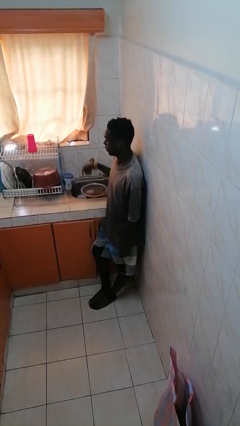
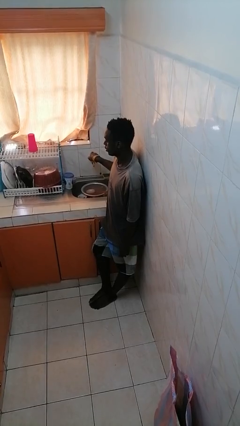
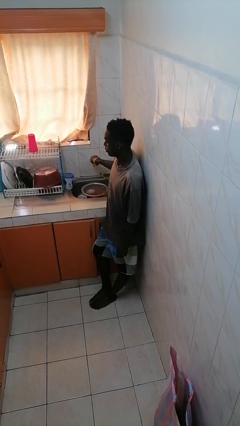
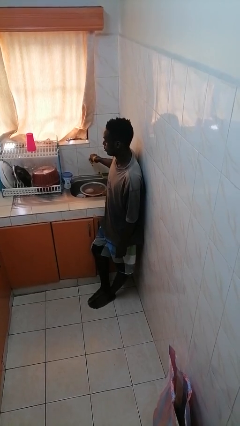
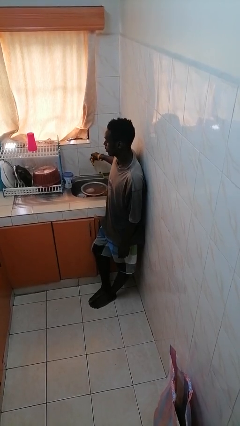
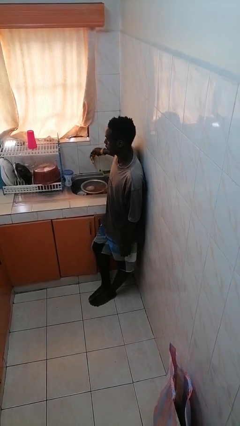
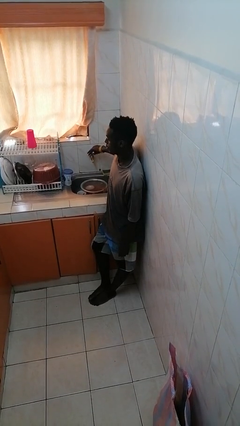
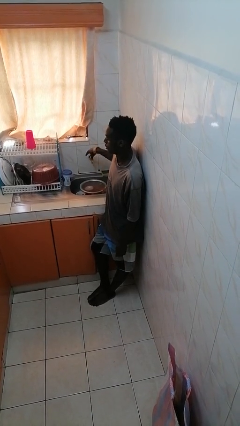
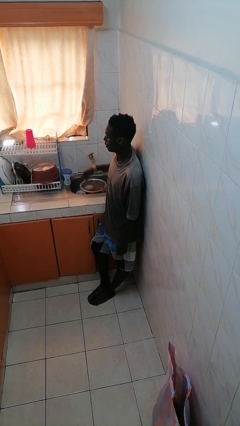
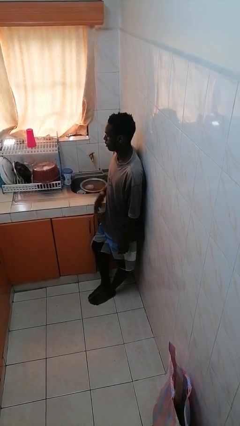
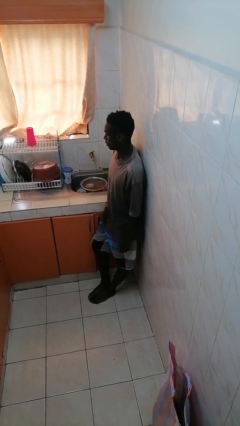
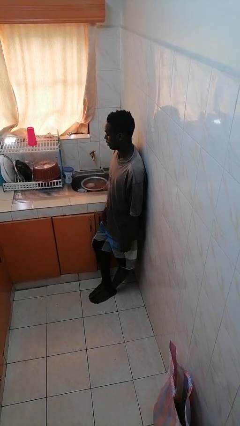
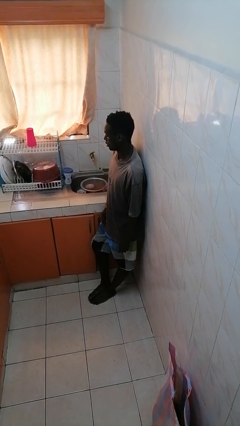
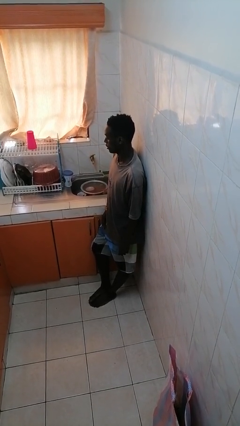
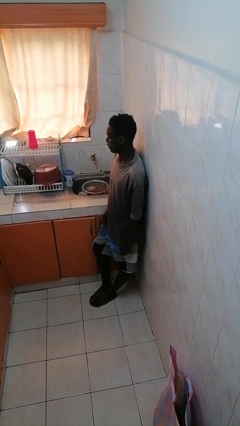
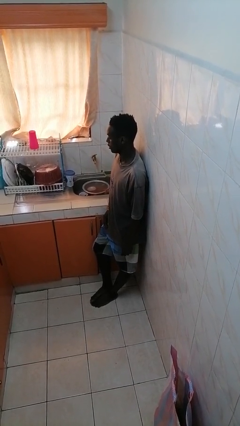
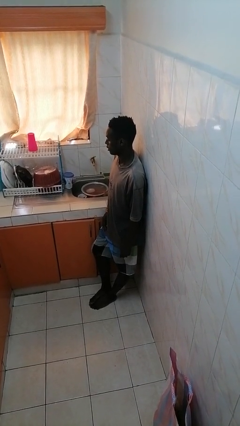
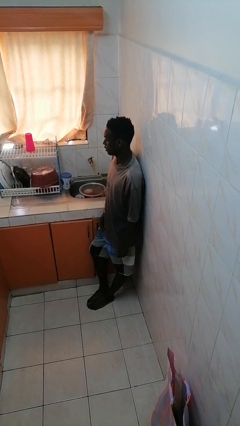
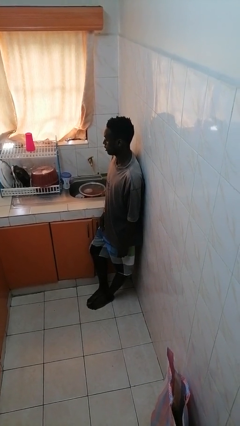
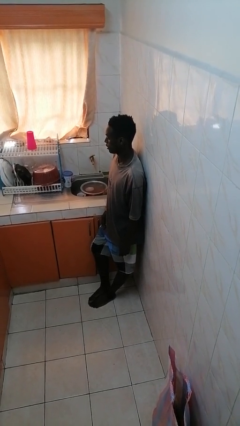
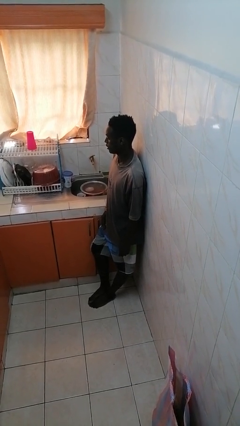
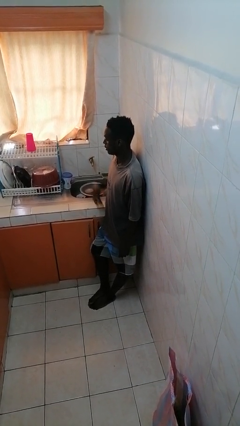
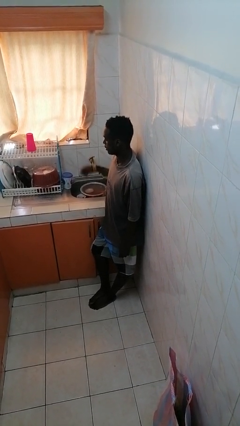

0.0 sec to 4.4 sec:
person turns on faucet

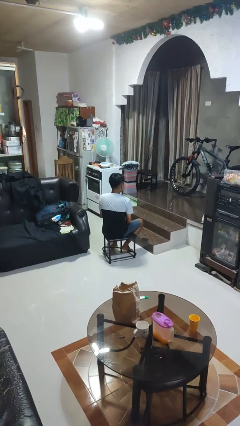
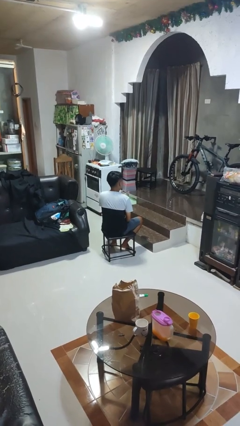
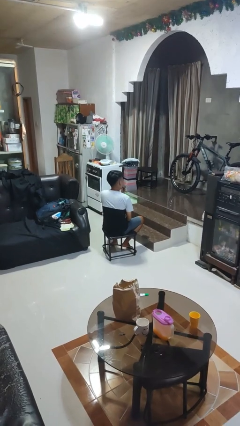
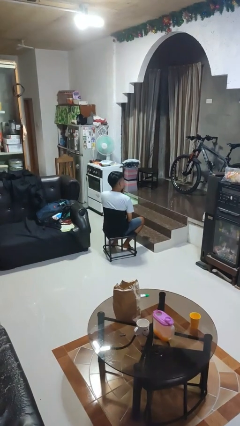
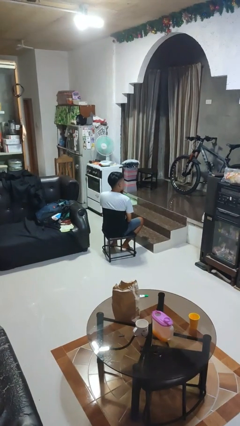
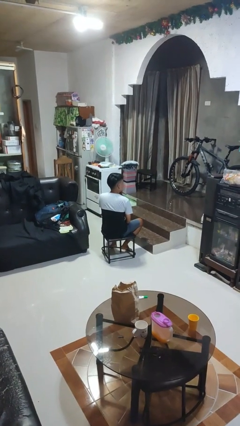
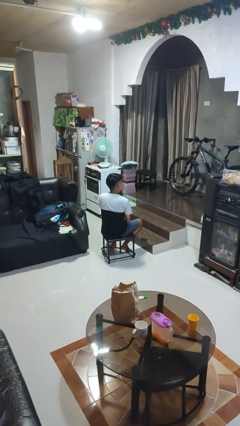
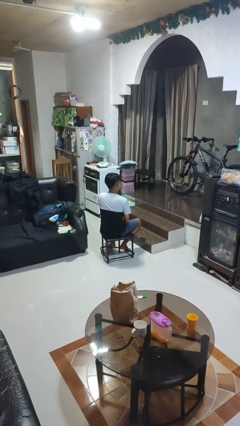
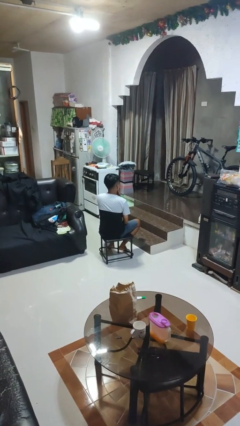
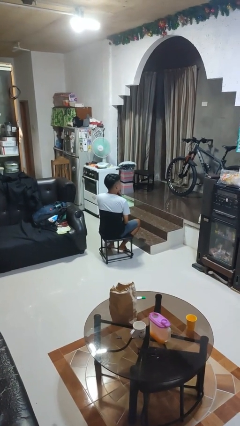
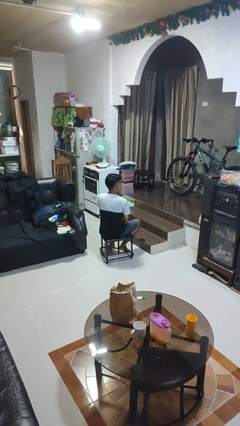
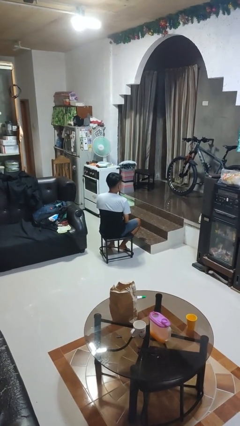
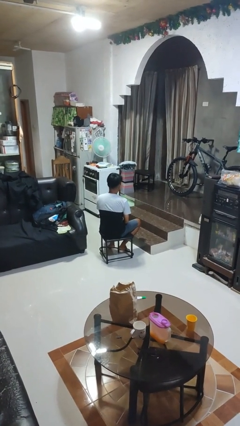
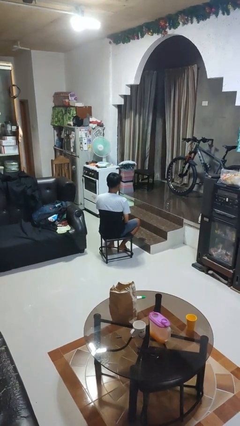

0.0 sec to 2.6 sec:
person strokes chin

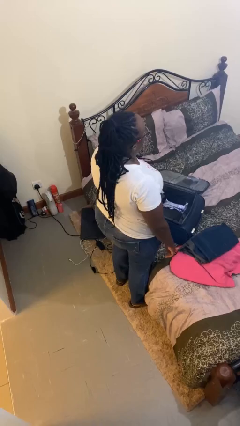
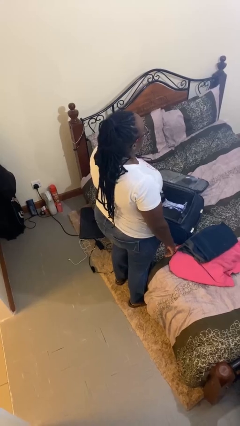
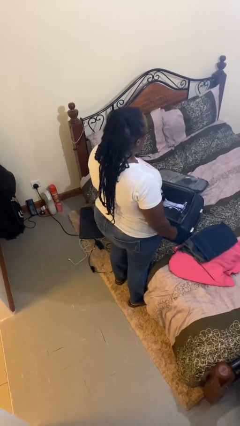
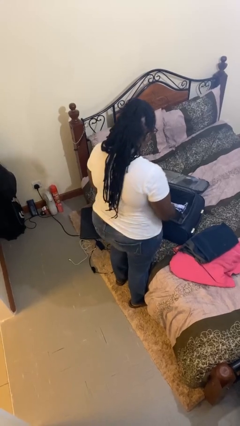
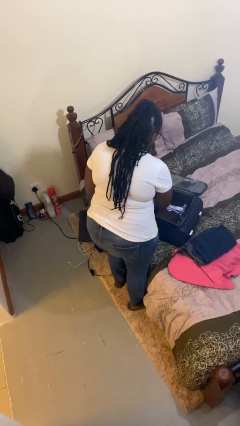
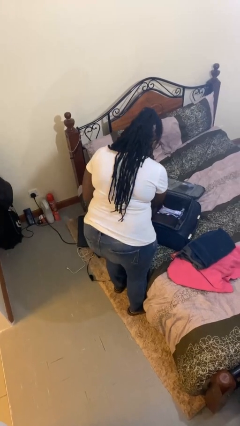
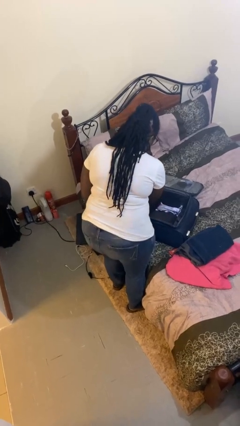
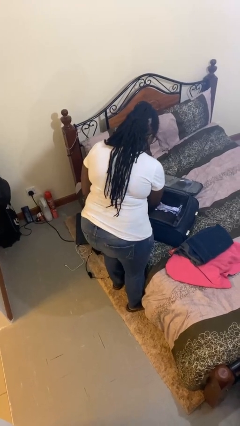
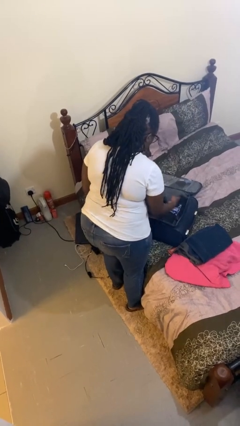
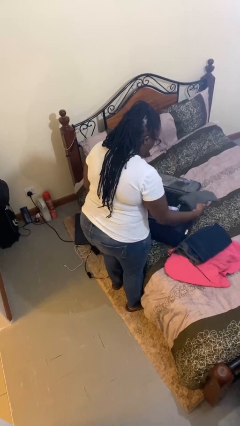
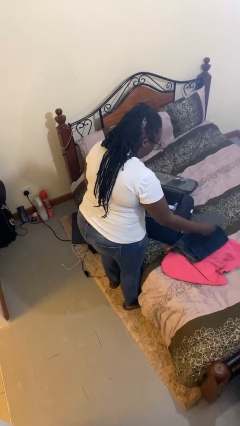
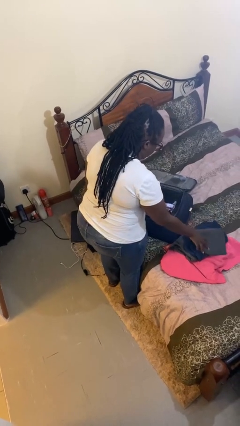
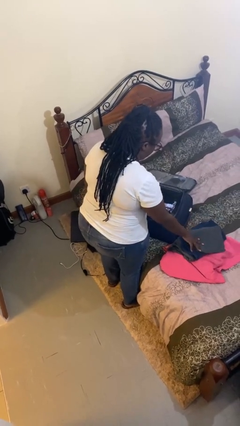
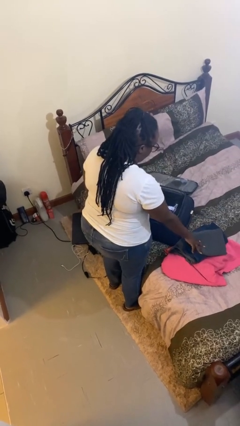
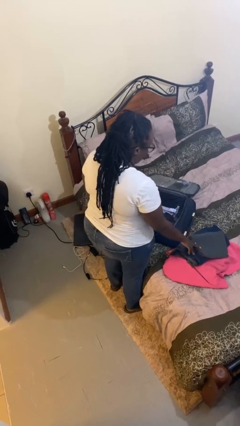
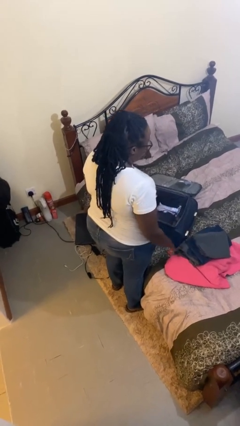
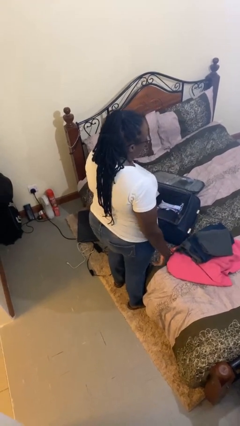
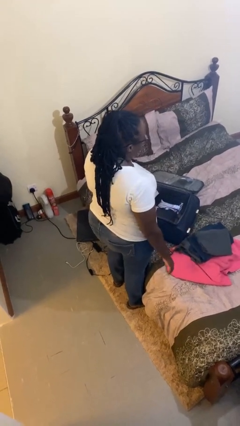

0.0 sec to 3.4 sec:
person unloads clothes from suitcase

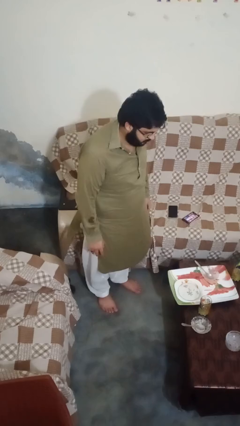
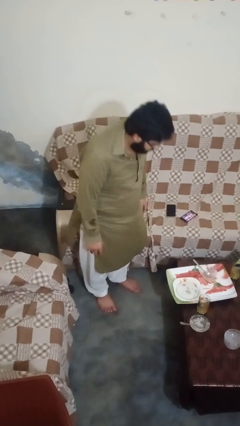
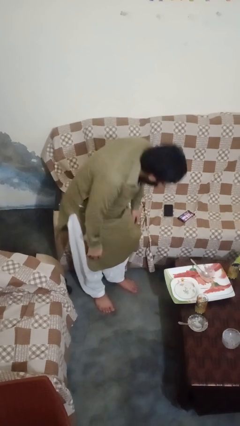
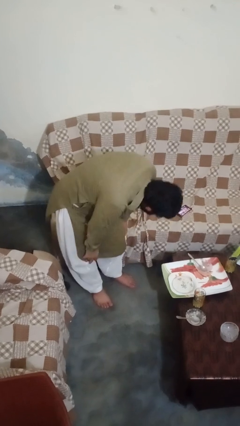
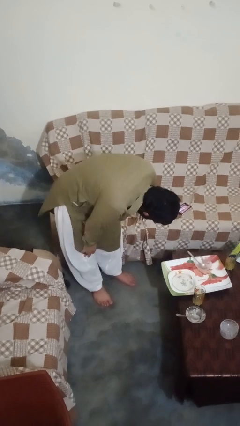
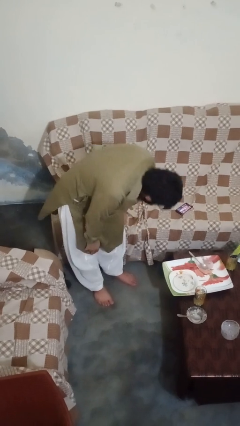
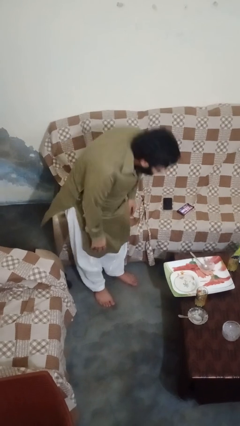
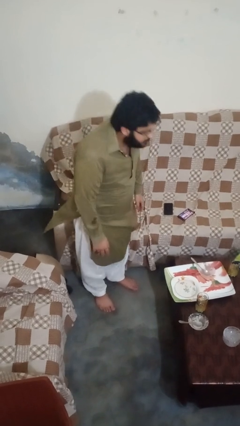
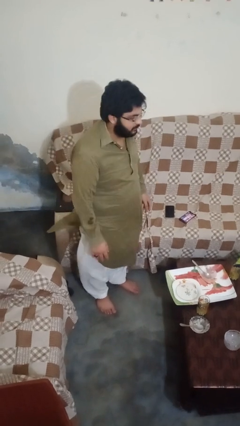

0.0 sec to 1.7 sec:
person bows

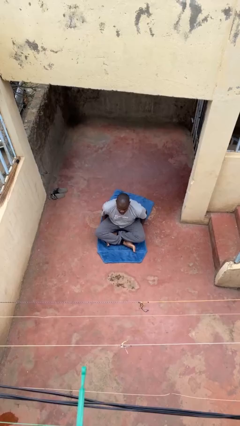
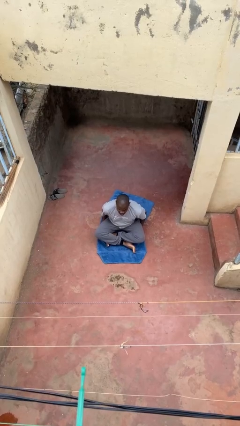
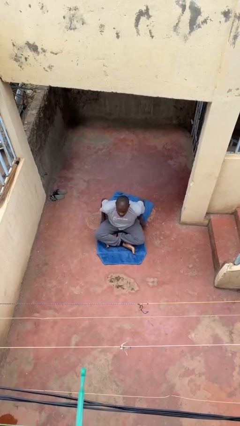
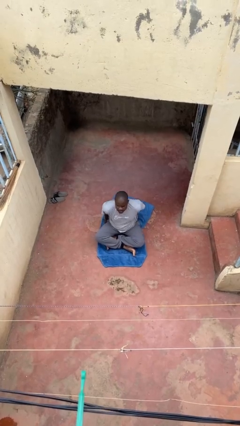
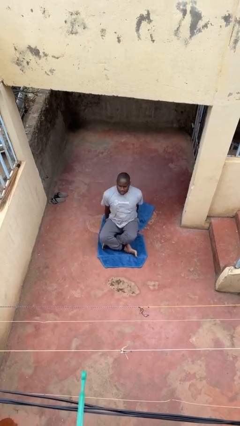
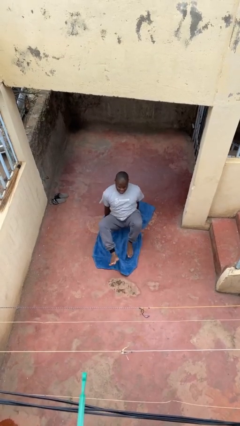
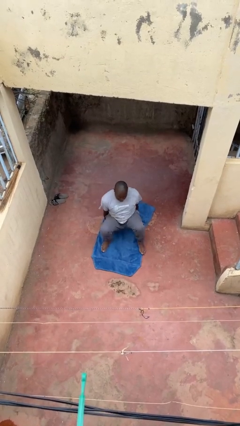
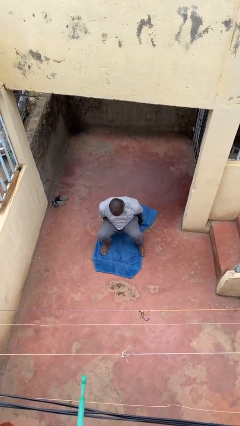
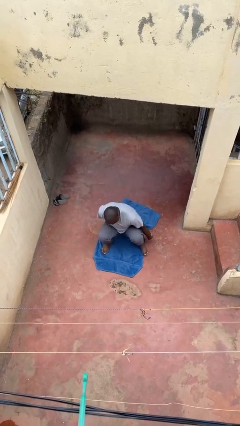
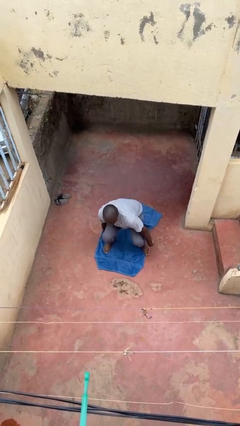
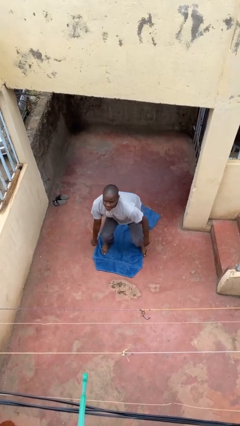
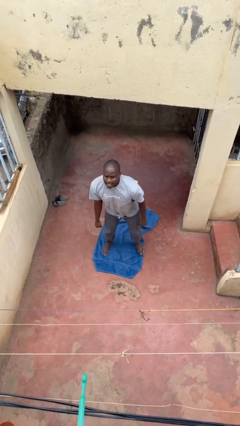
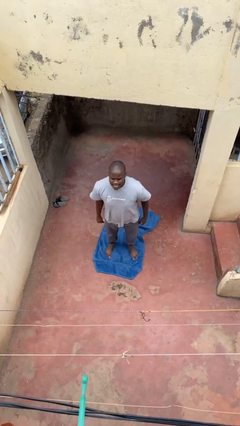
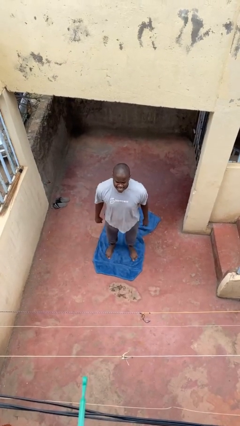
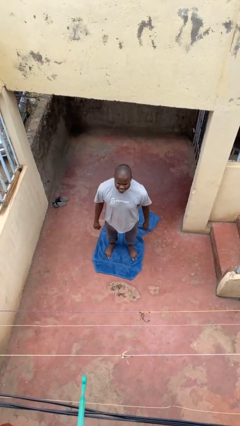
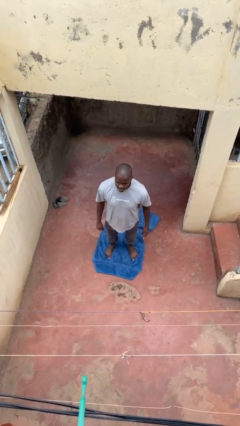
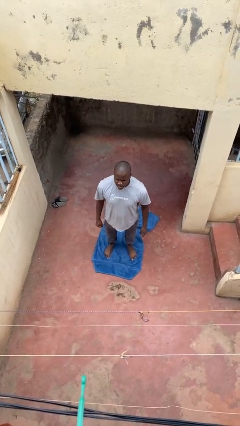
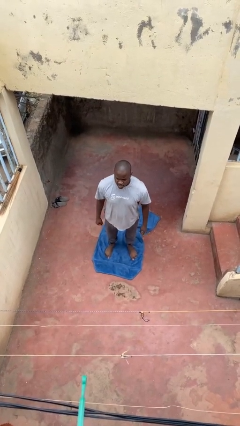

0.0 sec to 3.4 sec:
person stands up from floor

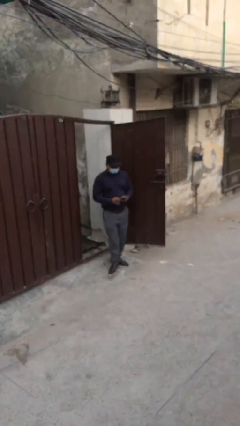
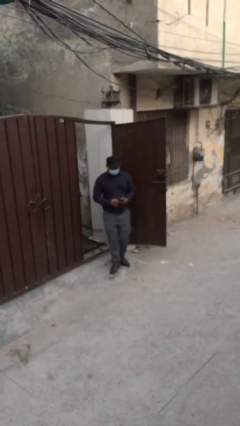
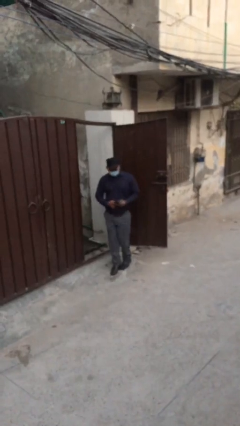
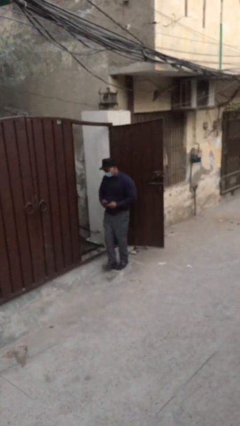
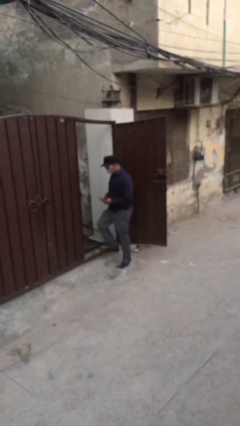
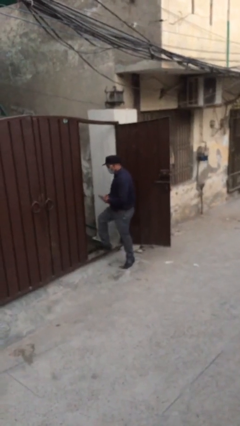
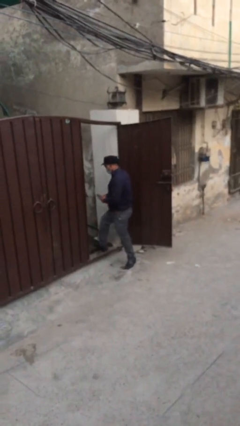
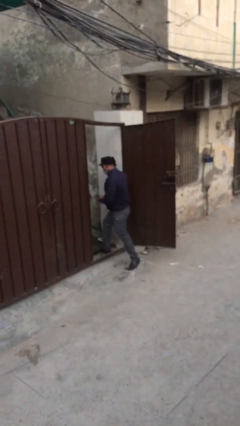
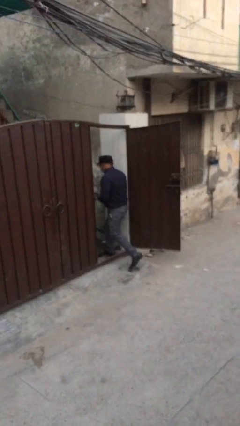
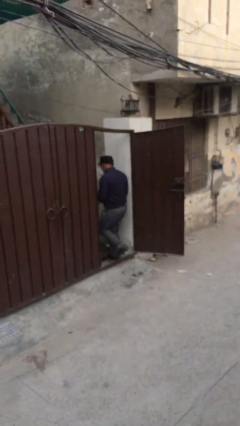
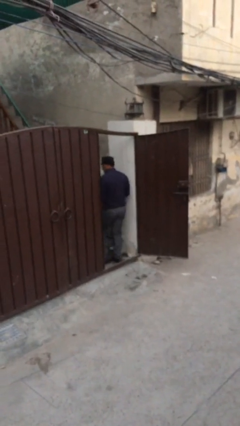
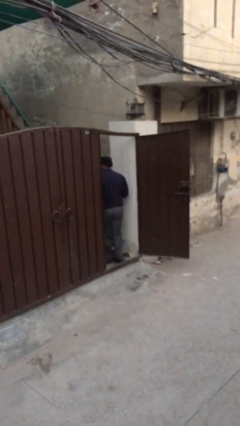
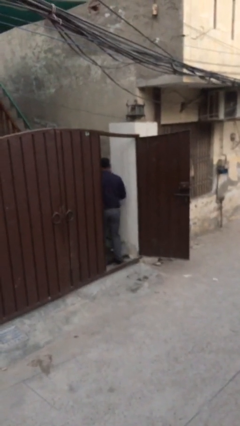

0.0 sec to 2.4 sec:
person exits scene through structure
